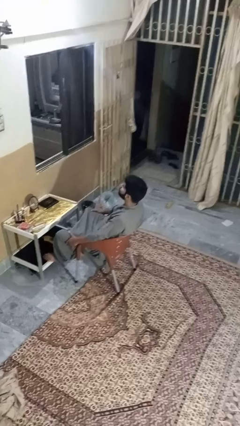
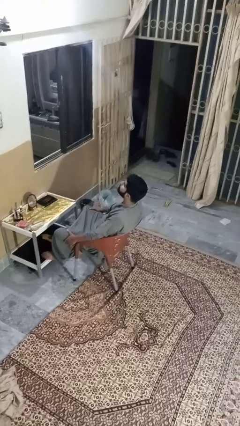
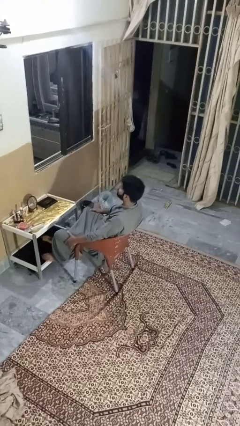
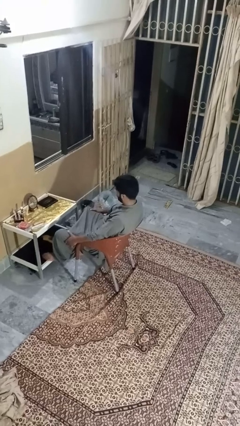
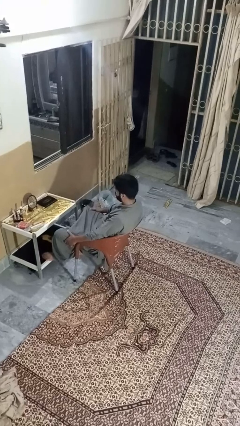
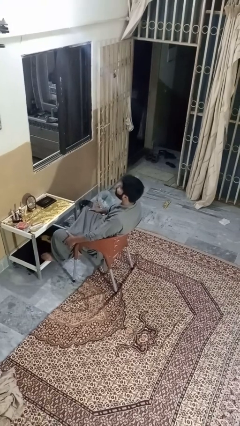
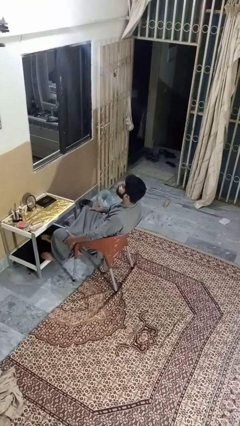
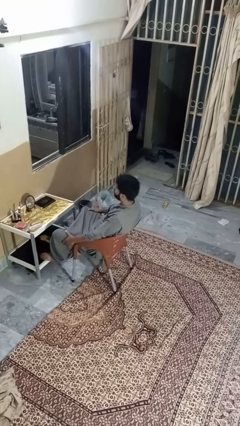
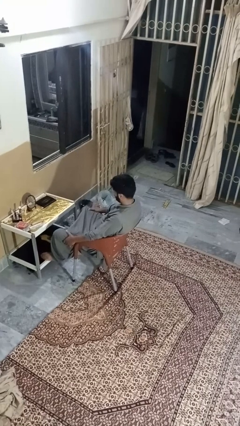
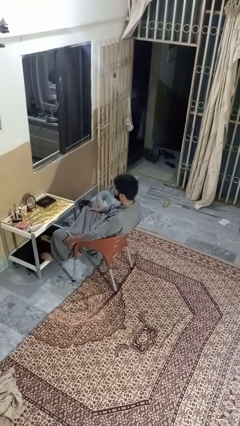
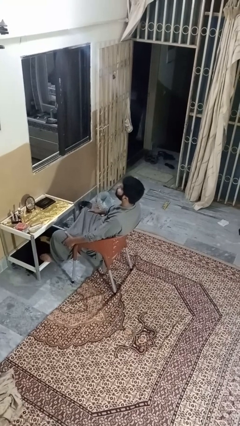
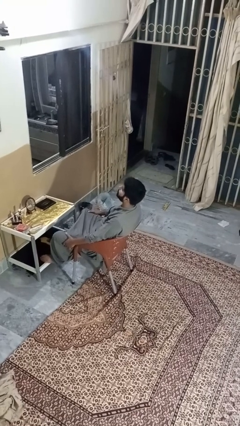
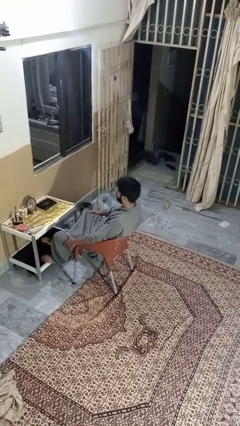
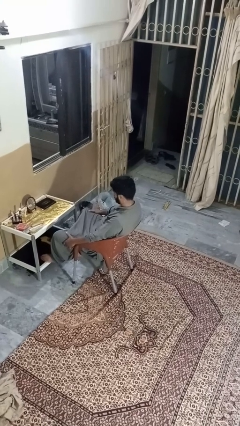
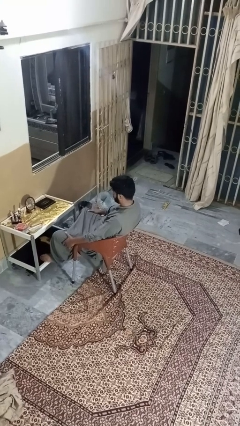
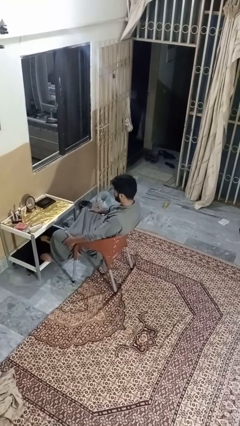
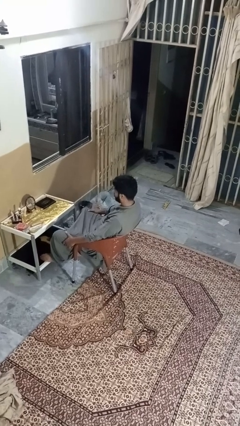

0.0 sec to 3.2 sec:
person nods head

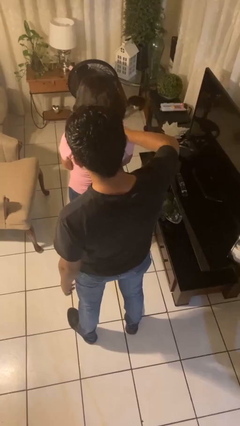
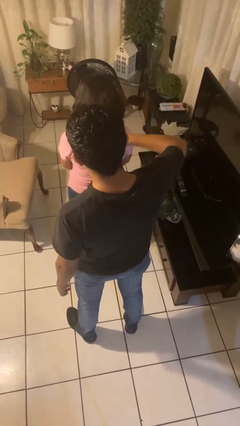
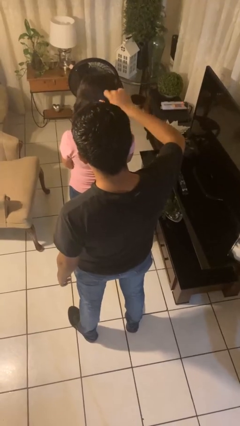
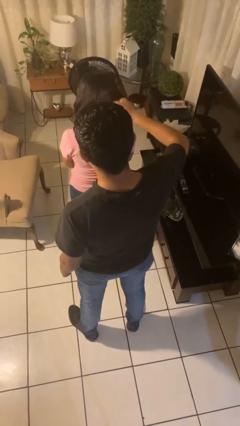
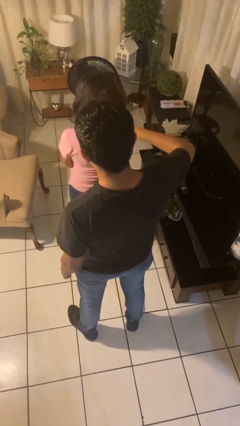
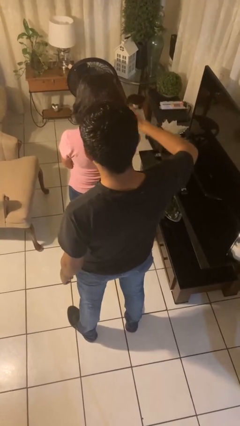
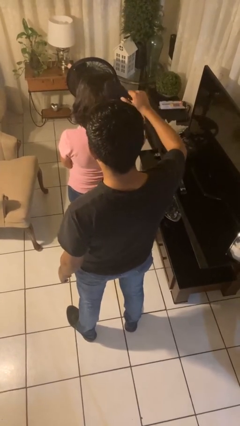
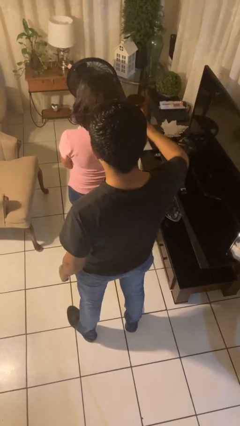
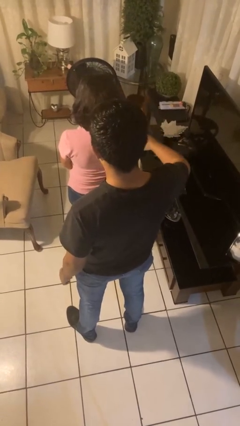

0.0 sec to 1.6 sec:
person brushes hair of person

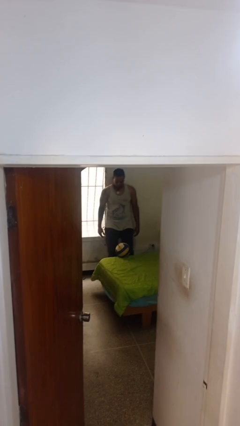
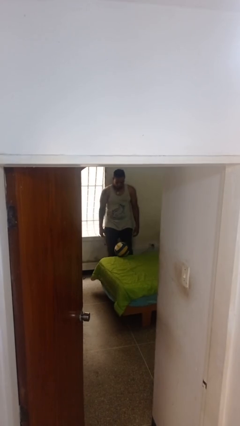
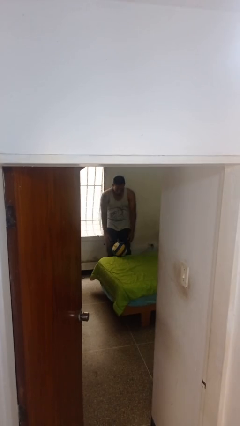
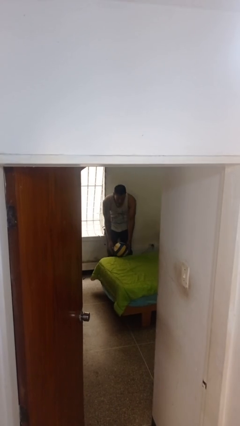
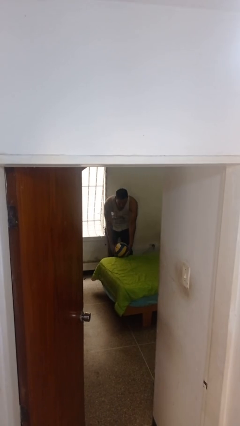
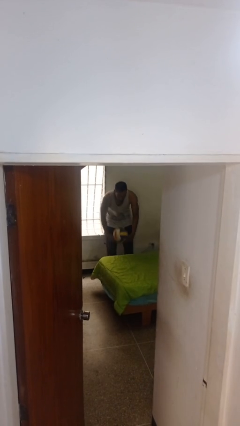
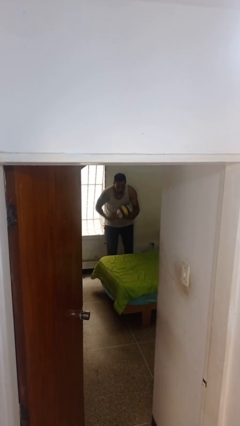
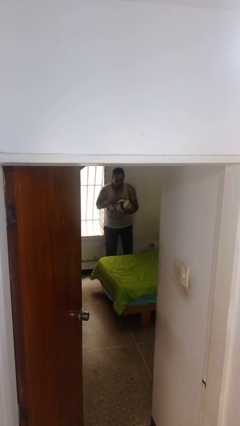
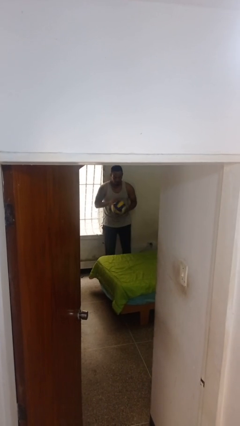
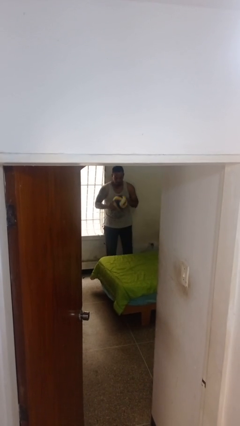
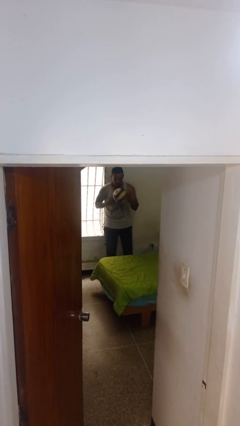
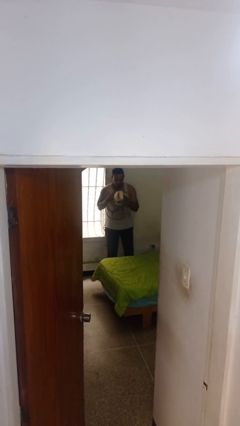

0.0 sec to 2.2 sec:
person picks up object from bed

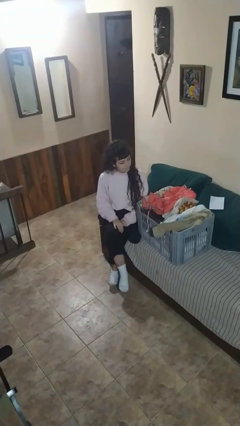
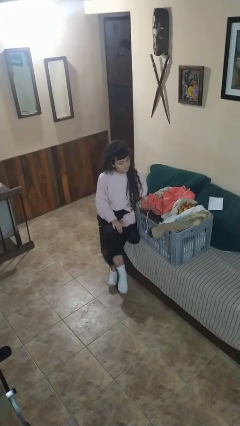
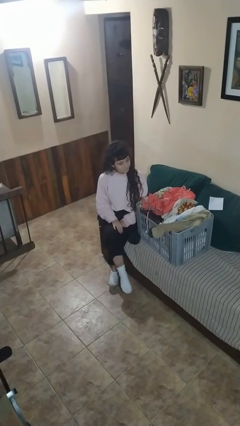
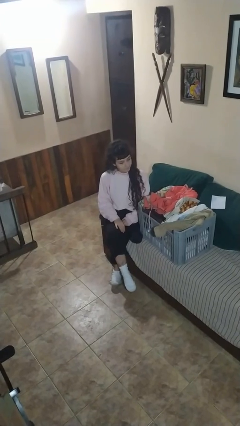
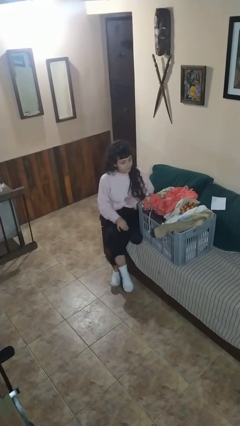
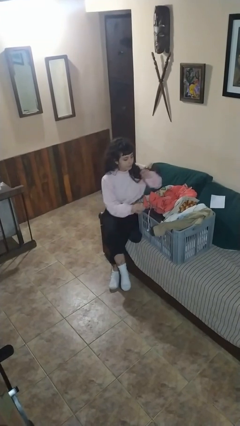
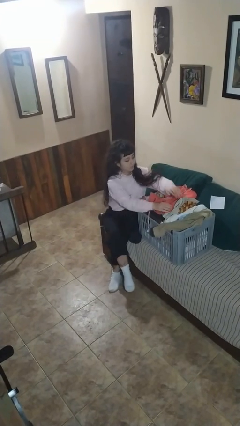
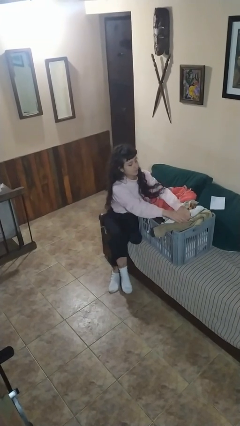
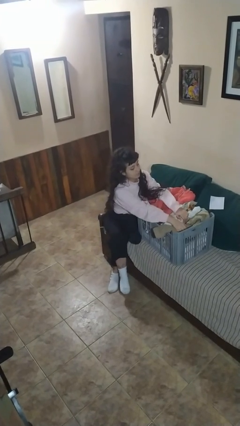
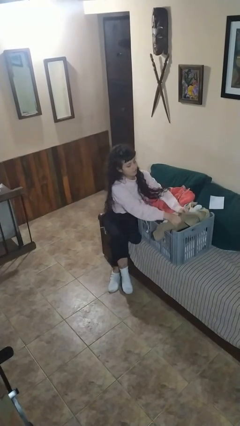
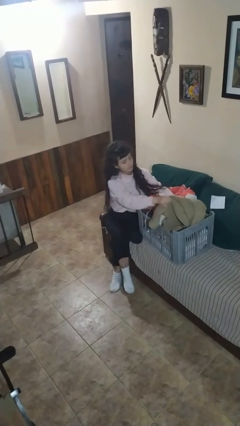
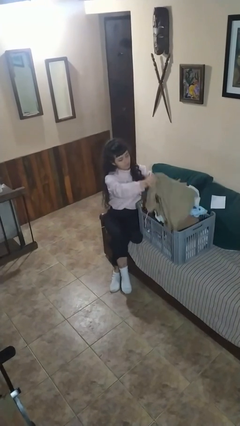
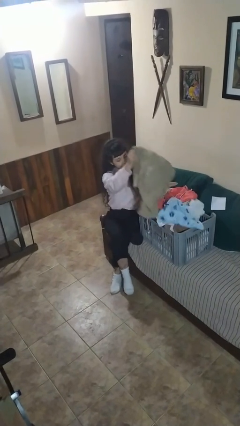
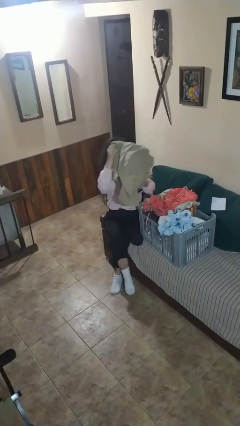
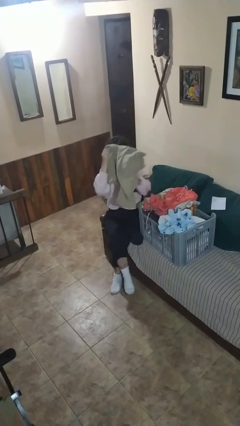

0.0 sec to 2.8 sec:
person takes object from basket

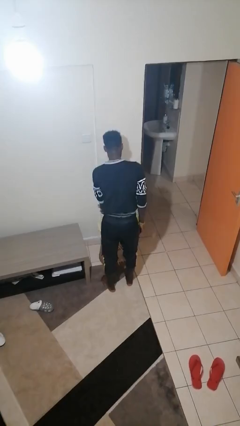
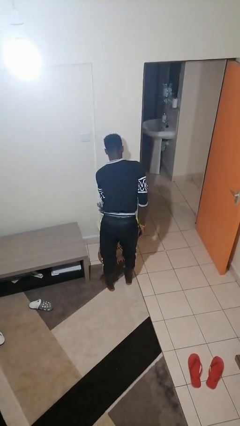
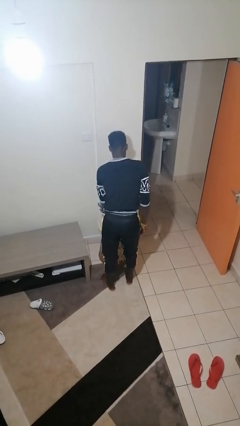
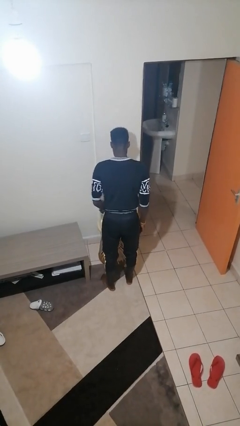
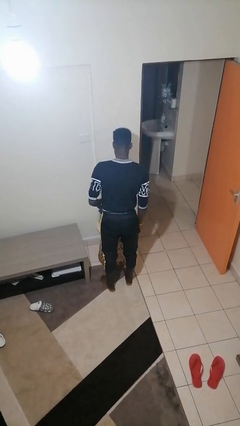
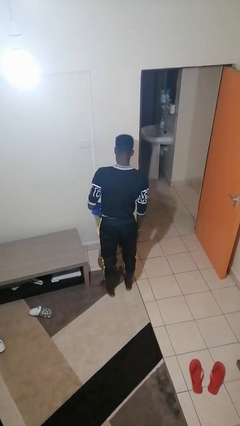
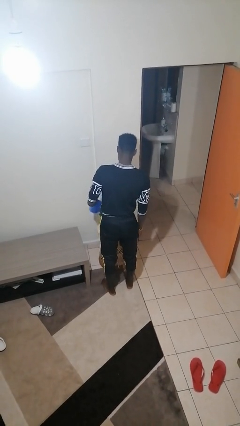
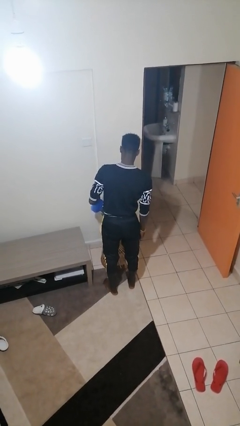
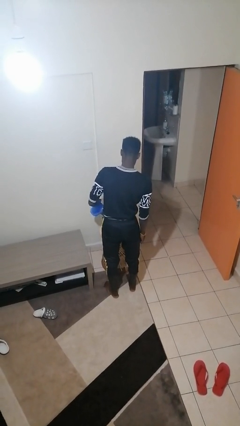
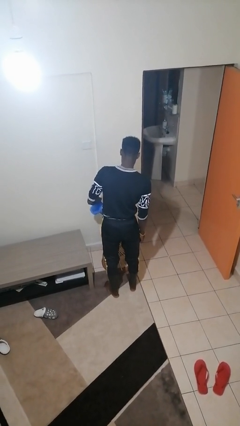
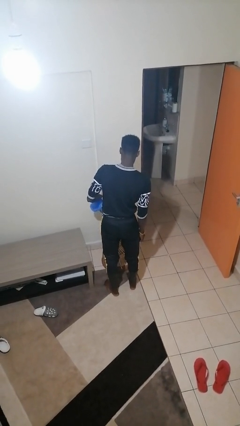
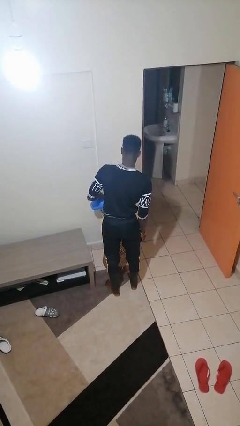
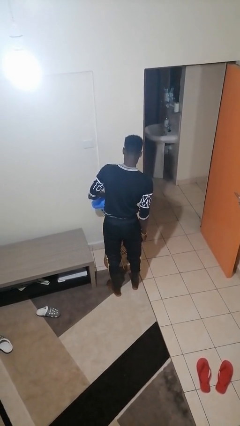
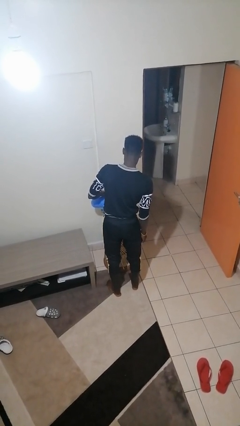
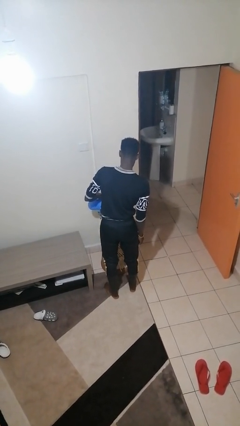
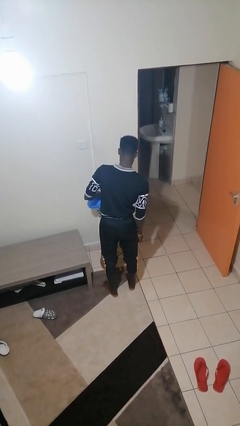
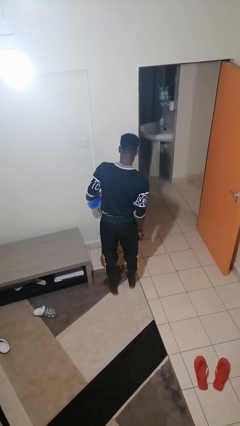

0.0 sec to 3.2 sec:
person waters houseplant

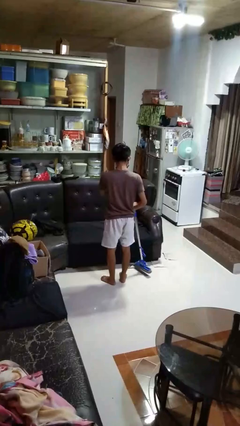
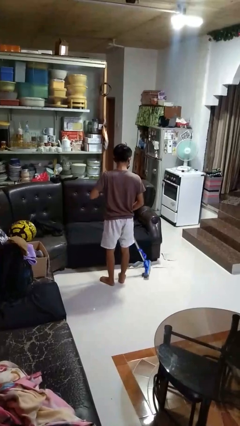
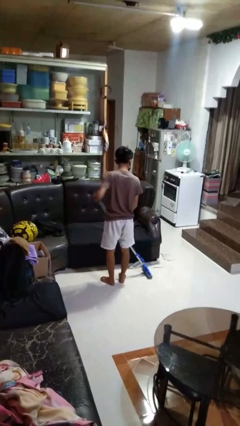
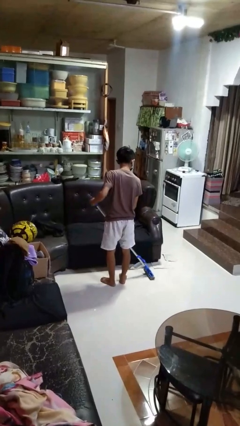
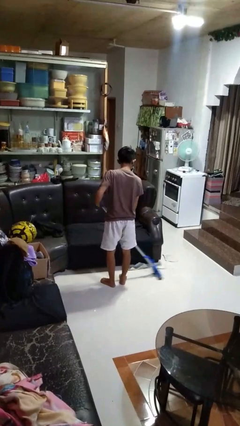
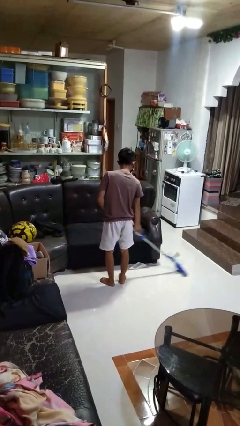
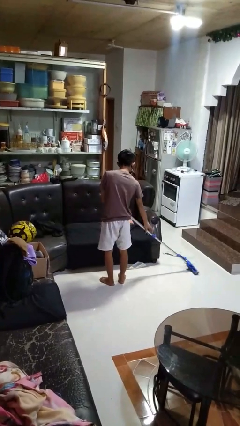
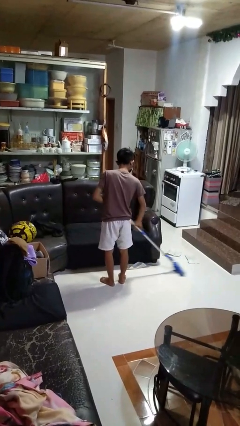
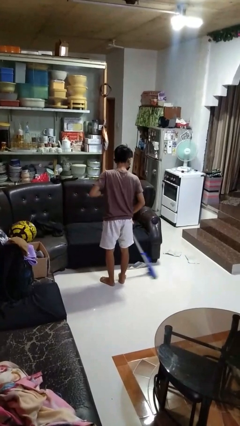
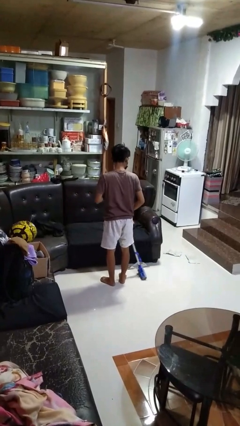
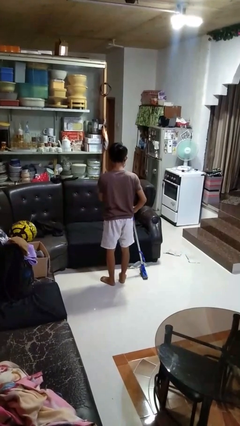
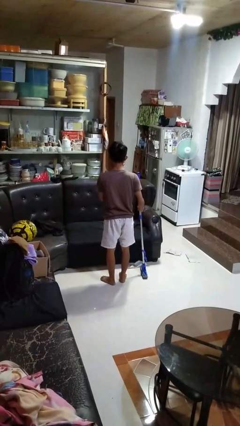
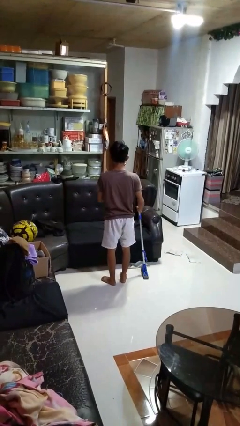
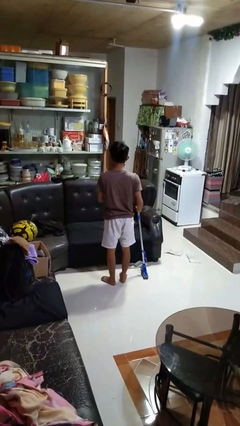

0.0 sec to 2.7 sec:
person mops

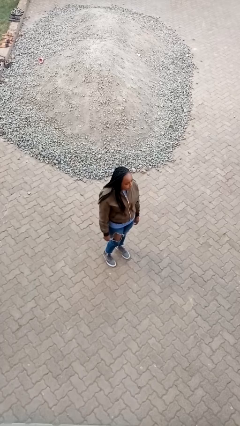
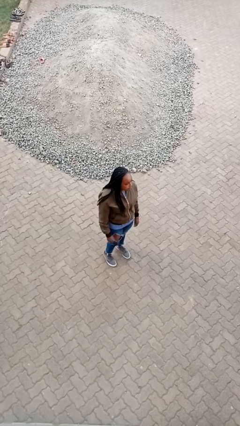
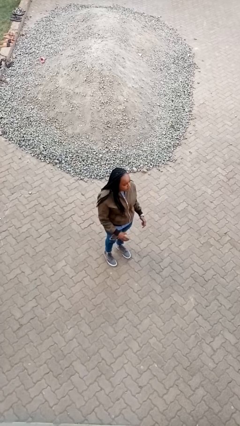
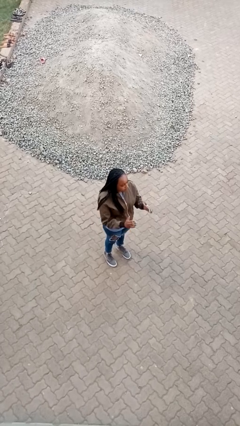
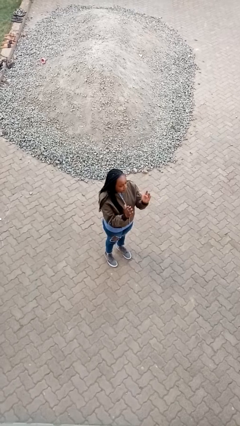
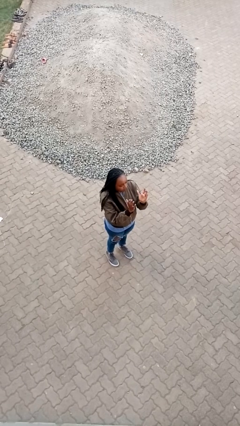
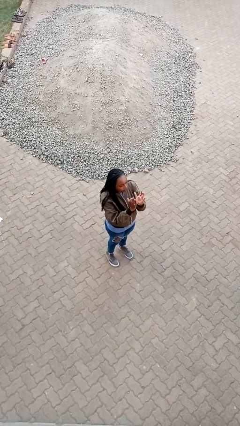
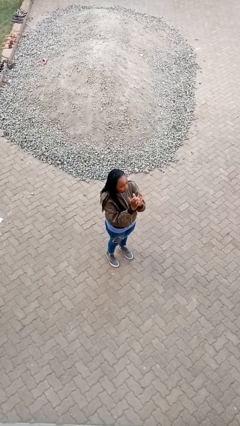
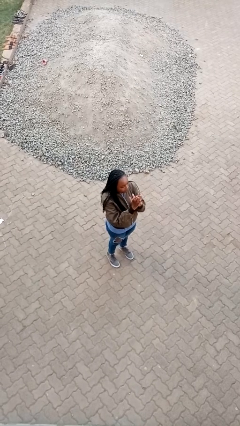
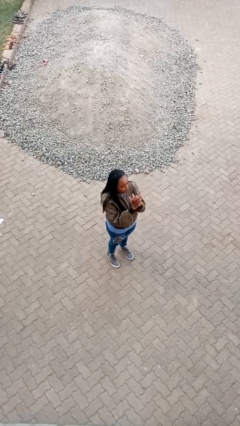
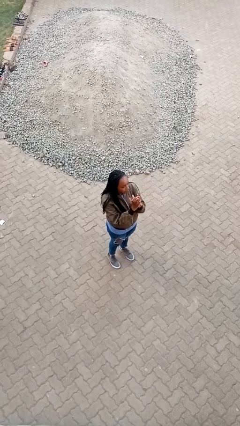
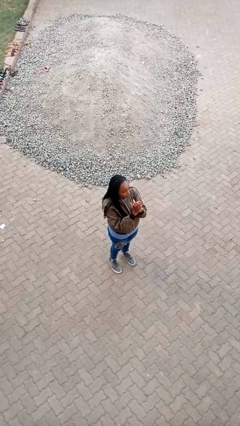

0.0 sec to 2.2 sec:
person gestures zoom in
